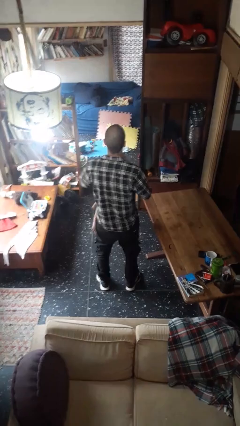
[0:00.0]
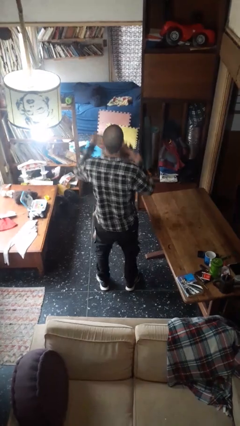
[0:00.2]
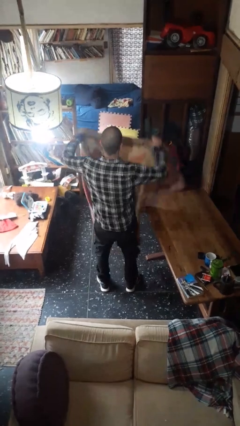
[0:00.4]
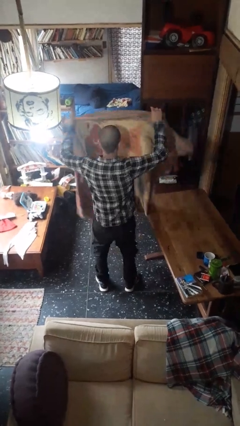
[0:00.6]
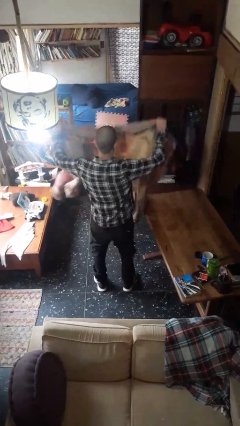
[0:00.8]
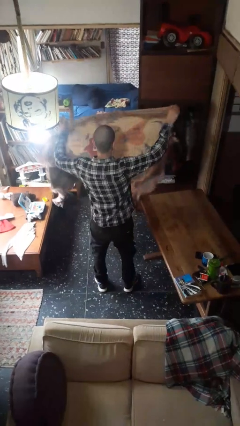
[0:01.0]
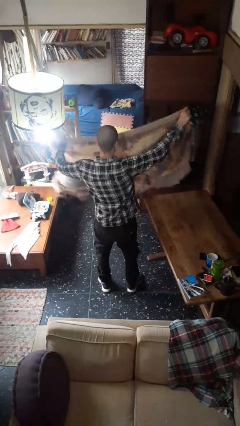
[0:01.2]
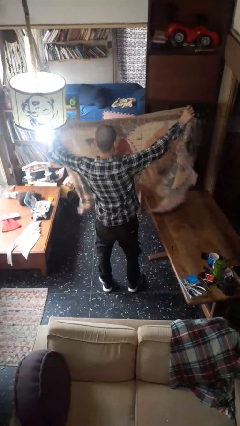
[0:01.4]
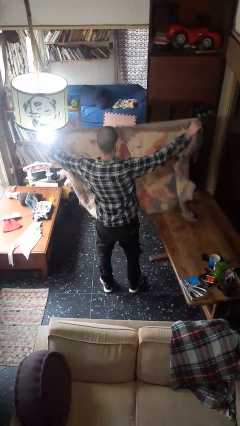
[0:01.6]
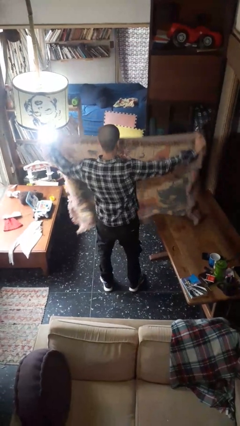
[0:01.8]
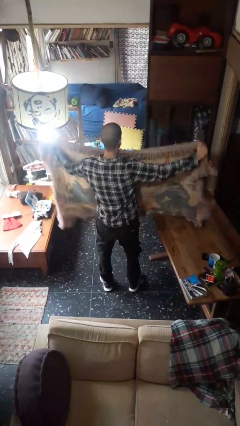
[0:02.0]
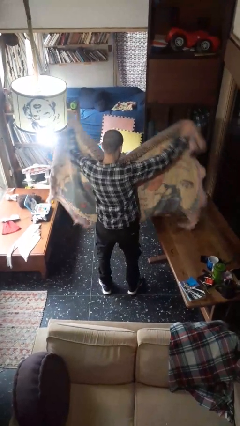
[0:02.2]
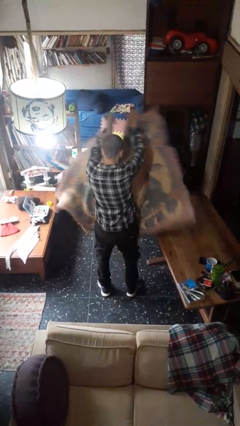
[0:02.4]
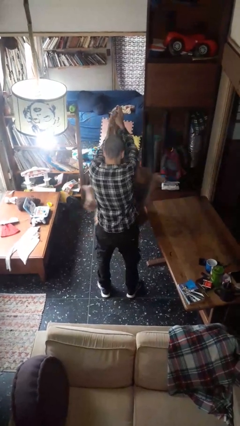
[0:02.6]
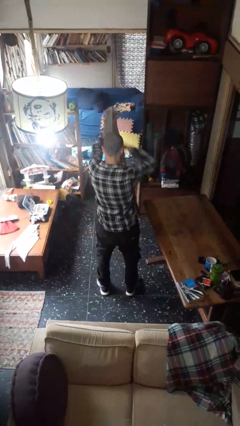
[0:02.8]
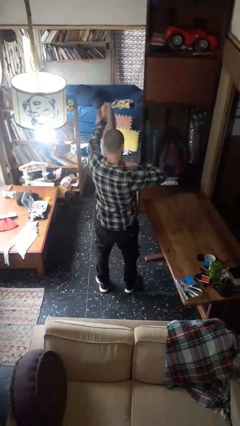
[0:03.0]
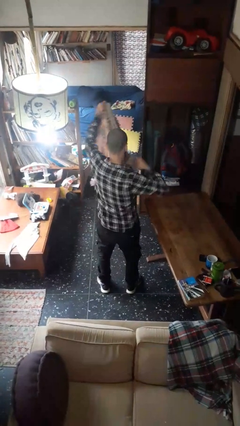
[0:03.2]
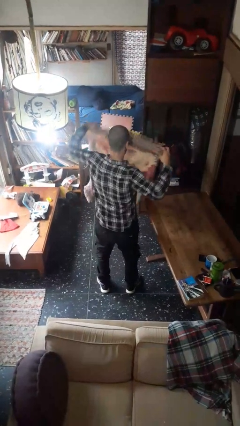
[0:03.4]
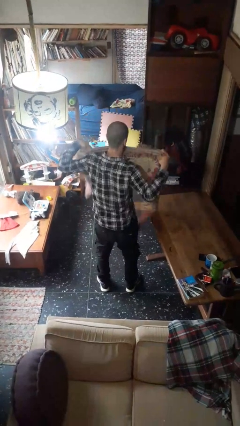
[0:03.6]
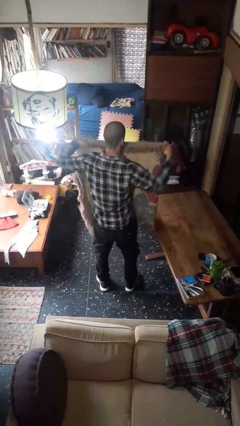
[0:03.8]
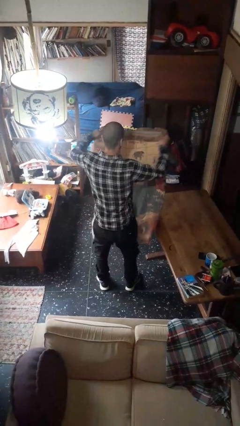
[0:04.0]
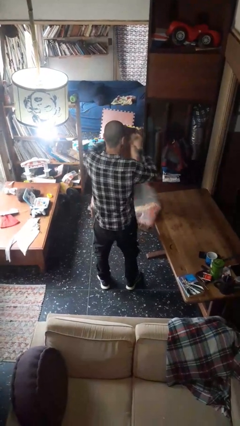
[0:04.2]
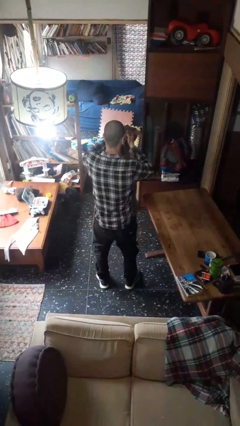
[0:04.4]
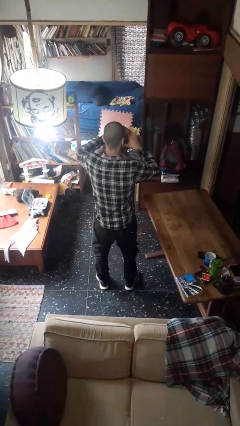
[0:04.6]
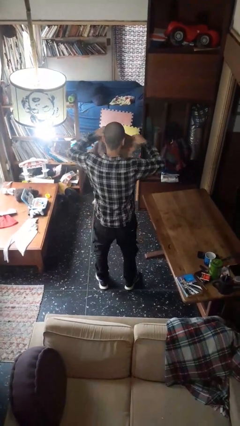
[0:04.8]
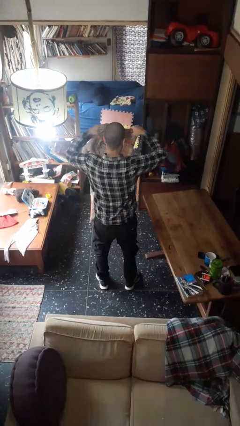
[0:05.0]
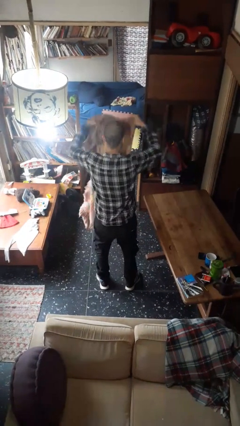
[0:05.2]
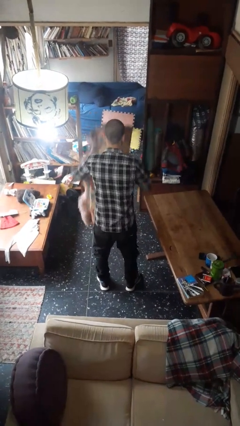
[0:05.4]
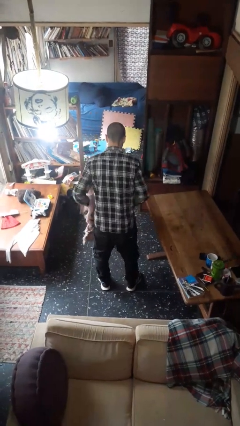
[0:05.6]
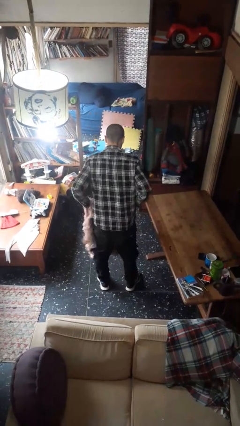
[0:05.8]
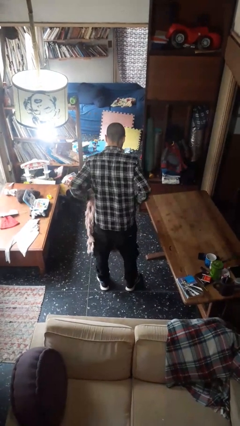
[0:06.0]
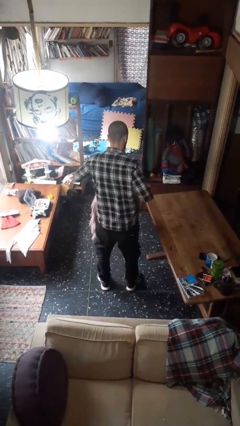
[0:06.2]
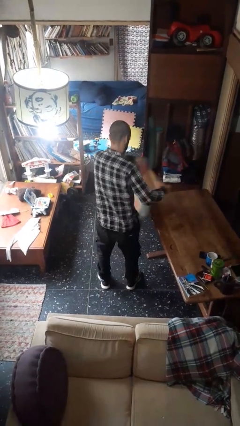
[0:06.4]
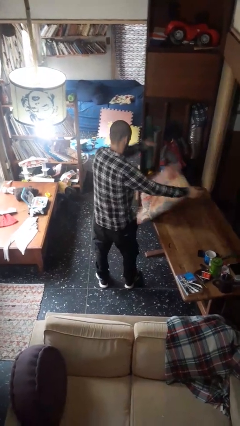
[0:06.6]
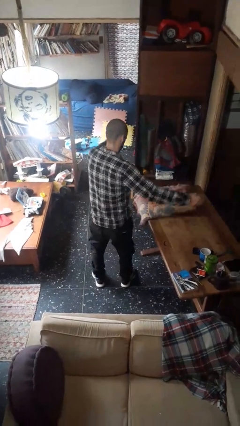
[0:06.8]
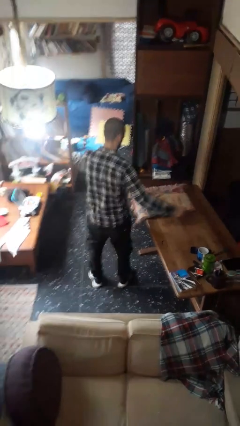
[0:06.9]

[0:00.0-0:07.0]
person folds blanket

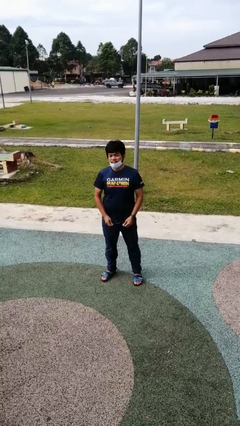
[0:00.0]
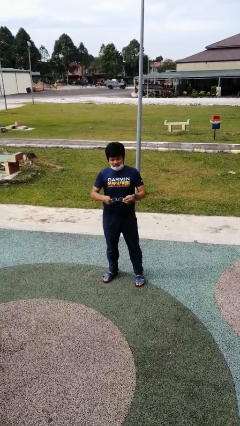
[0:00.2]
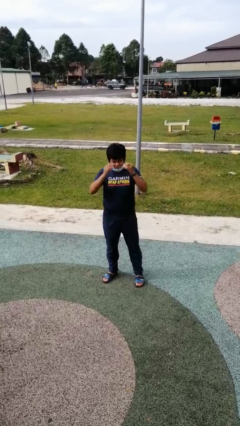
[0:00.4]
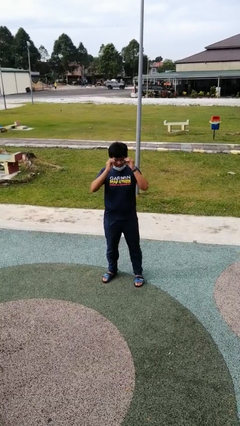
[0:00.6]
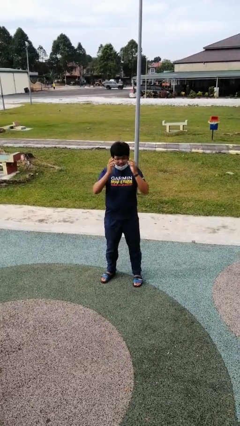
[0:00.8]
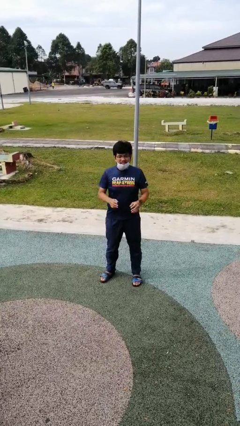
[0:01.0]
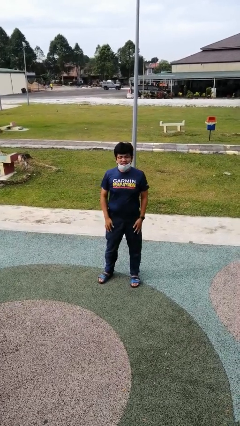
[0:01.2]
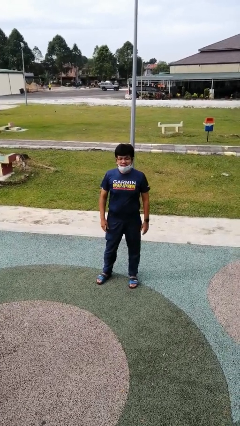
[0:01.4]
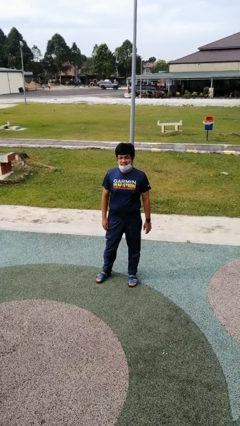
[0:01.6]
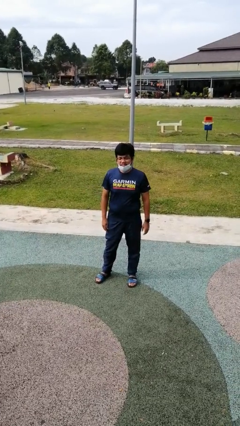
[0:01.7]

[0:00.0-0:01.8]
person puts on glasses

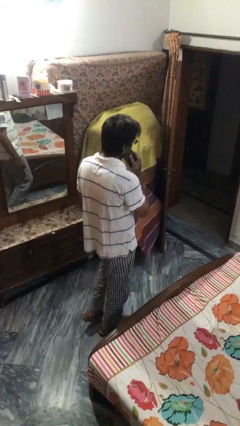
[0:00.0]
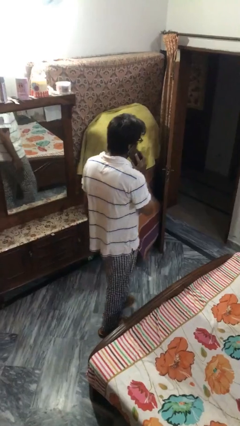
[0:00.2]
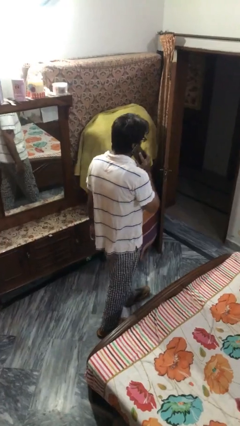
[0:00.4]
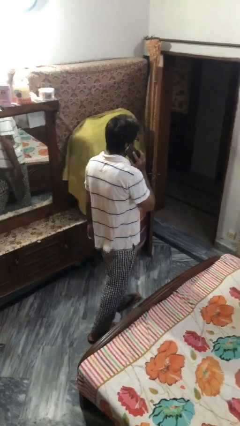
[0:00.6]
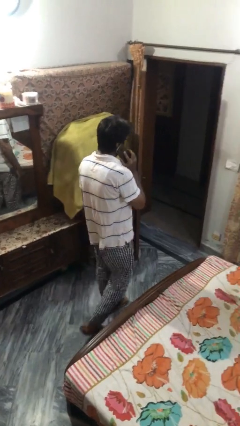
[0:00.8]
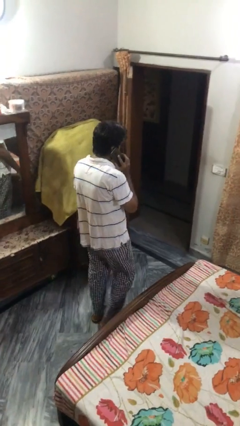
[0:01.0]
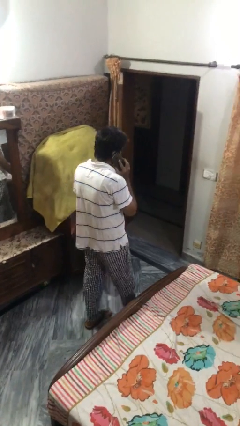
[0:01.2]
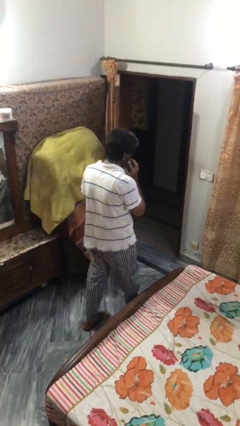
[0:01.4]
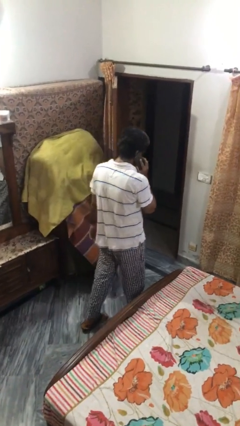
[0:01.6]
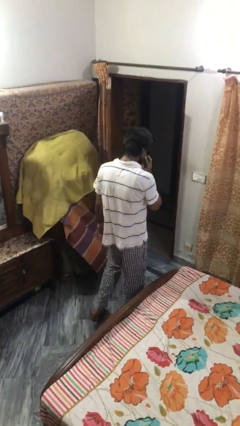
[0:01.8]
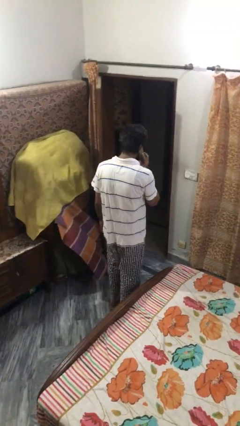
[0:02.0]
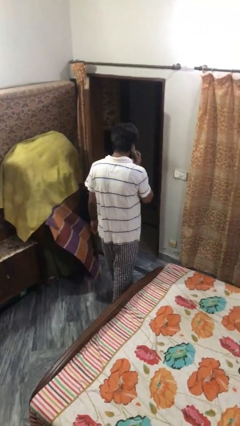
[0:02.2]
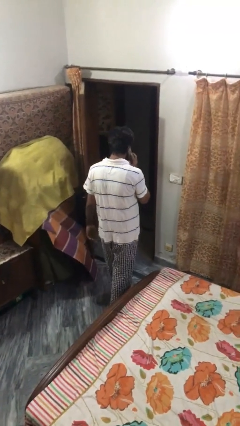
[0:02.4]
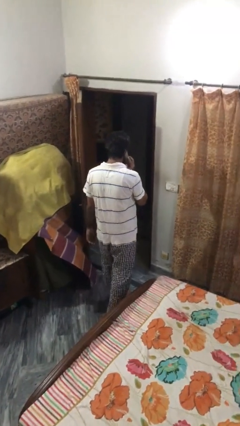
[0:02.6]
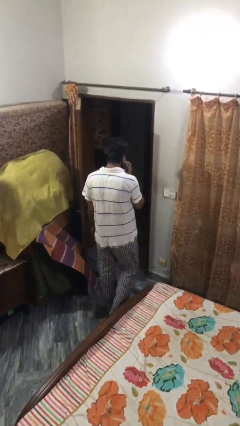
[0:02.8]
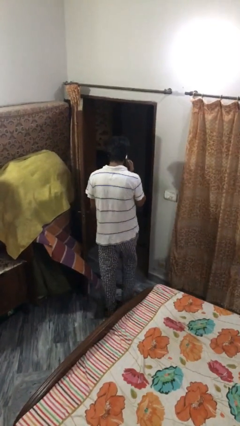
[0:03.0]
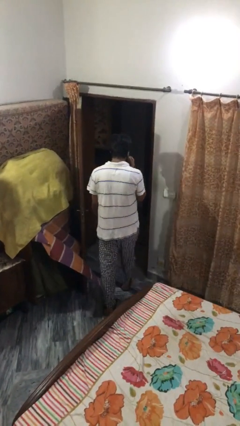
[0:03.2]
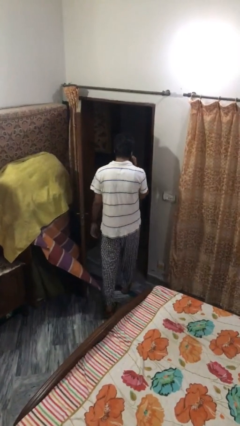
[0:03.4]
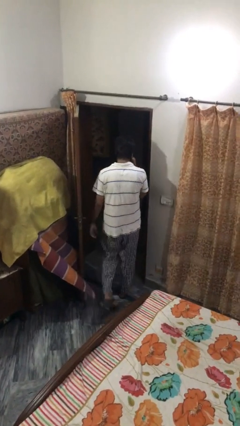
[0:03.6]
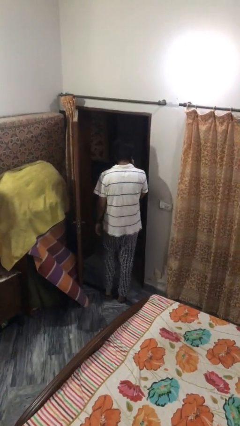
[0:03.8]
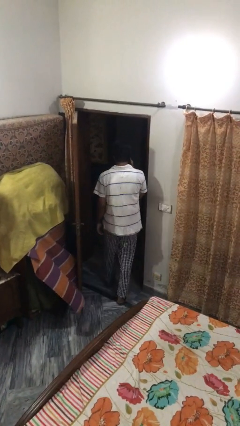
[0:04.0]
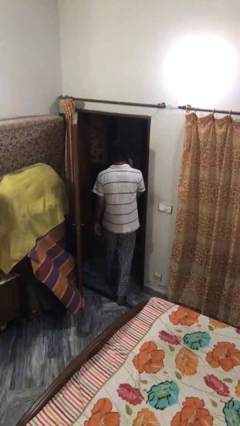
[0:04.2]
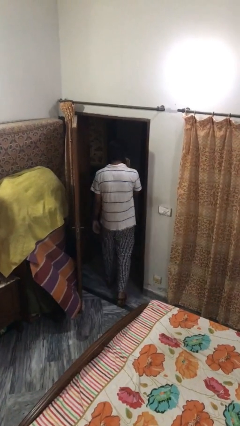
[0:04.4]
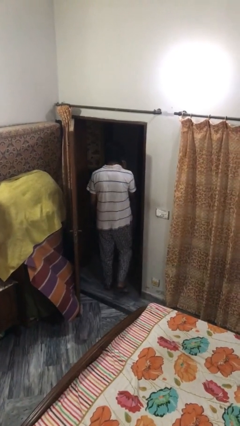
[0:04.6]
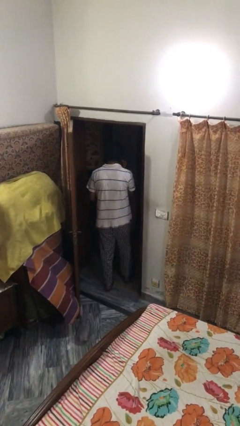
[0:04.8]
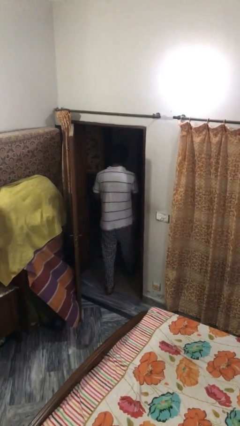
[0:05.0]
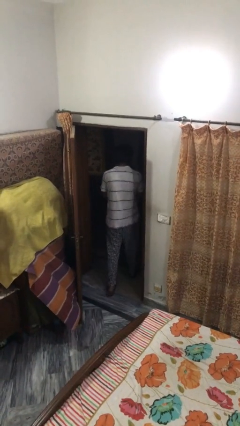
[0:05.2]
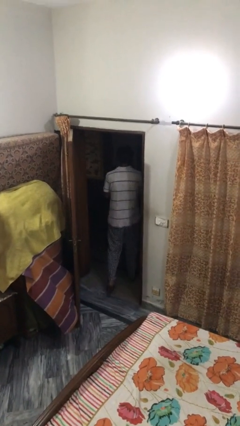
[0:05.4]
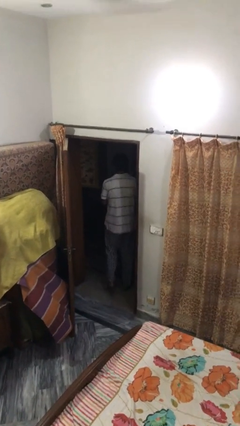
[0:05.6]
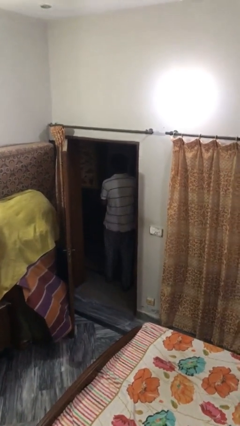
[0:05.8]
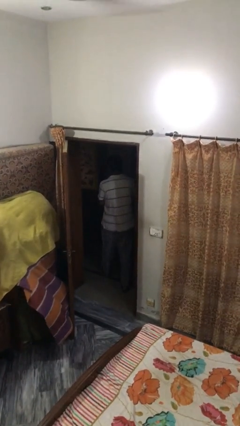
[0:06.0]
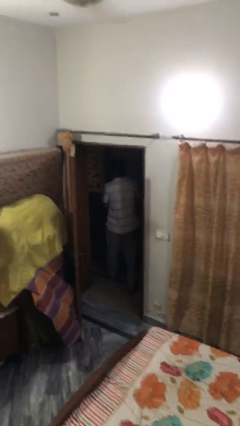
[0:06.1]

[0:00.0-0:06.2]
person exits scene through structure

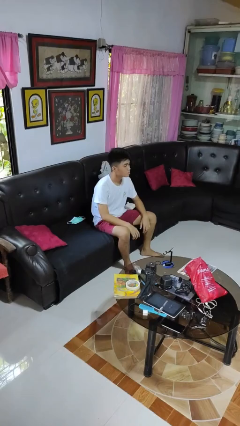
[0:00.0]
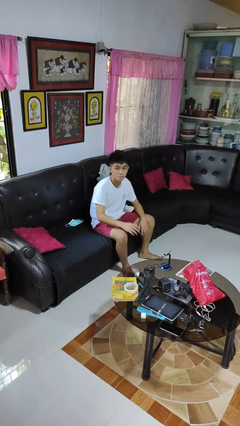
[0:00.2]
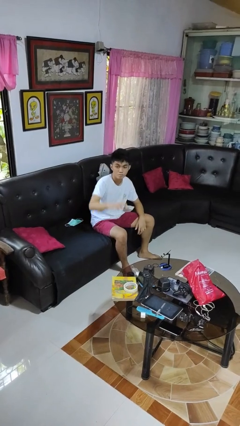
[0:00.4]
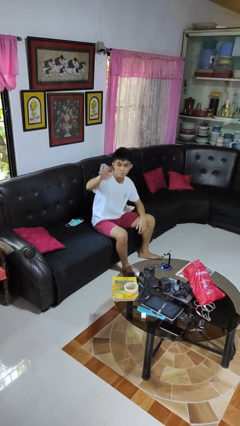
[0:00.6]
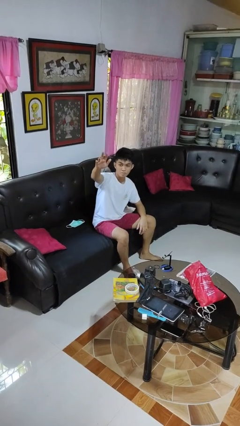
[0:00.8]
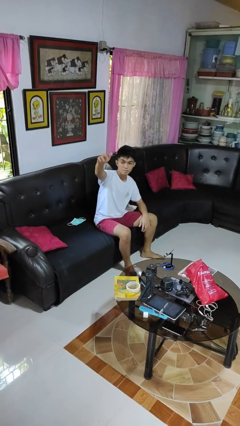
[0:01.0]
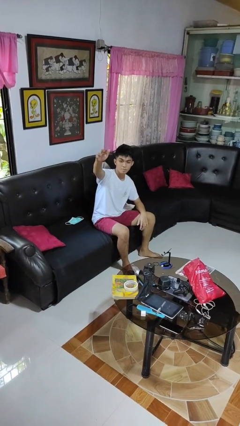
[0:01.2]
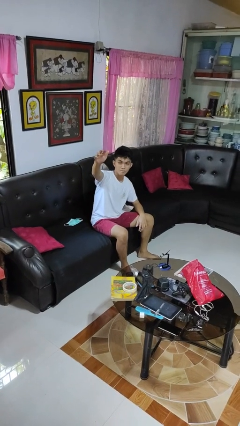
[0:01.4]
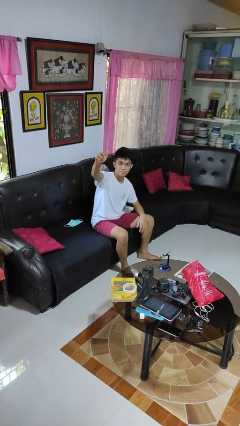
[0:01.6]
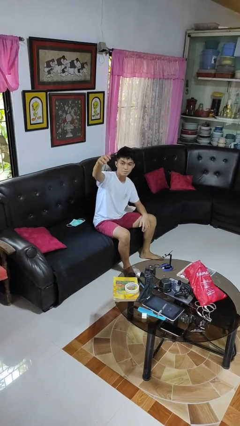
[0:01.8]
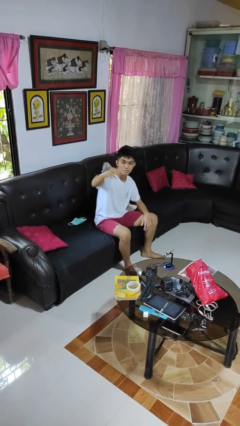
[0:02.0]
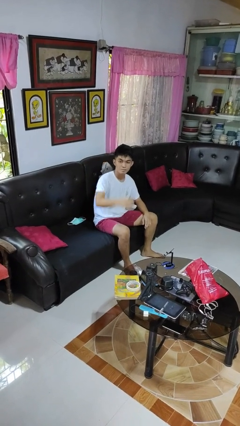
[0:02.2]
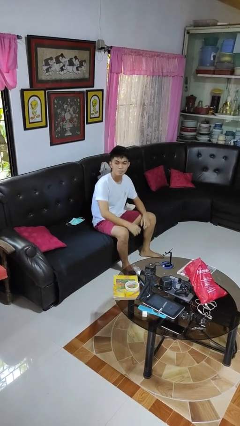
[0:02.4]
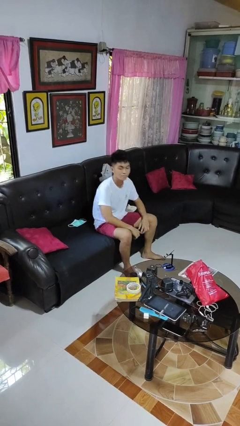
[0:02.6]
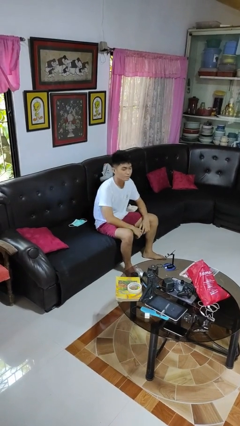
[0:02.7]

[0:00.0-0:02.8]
person gestures come here
